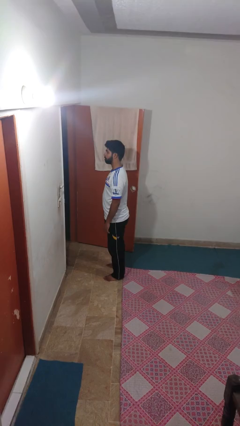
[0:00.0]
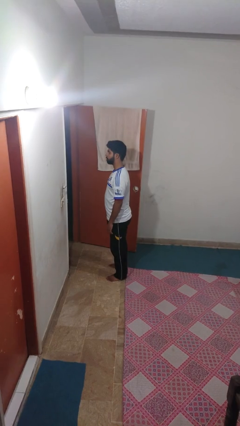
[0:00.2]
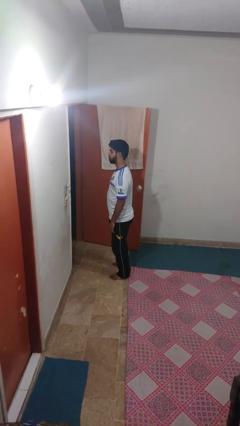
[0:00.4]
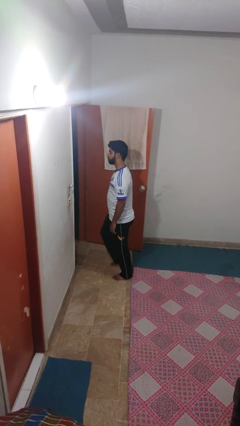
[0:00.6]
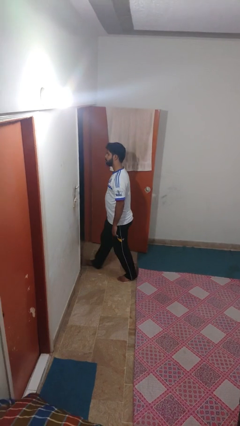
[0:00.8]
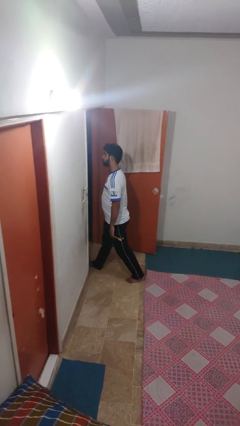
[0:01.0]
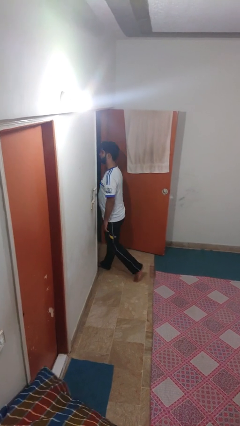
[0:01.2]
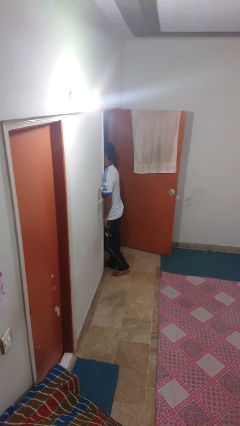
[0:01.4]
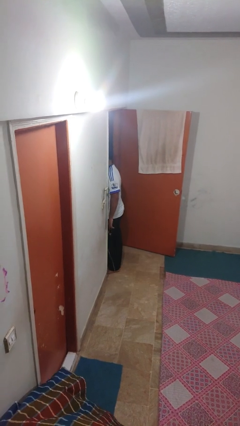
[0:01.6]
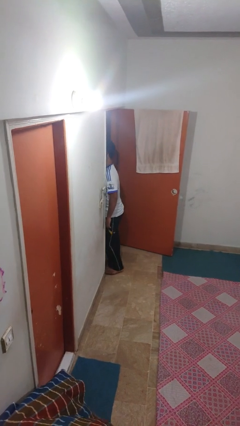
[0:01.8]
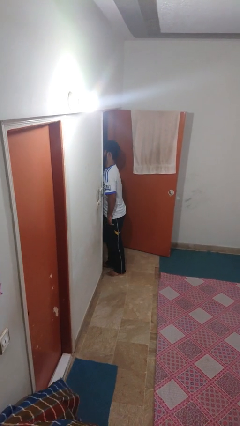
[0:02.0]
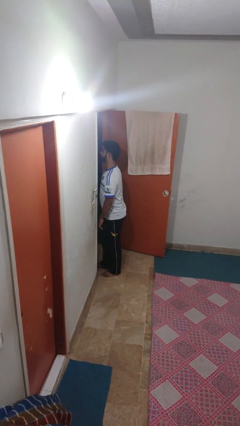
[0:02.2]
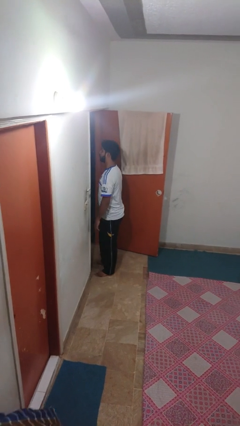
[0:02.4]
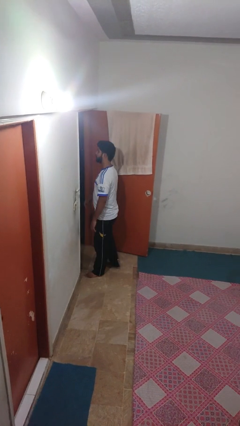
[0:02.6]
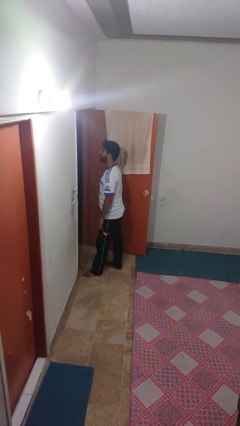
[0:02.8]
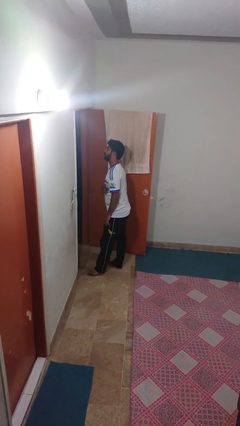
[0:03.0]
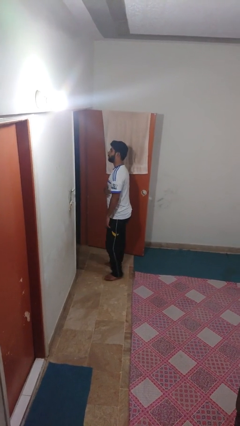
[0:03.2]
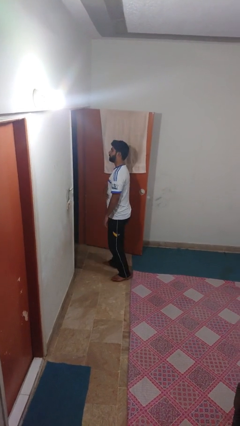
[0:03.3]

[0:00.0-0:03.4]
person bumps into wall

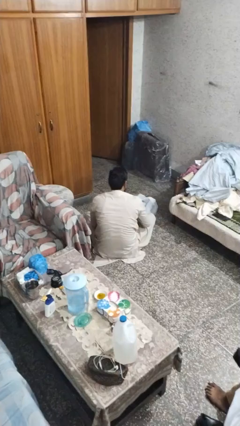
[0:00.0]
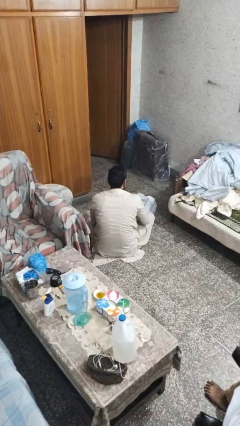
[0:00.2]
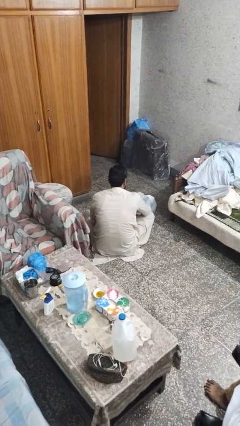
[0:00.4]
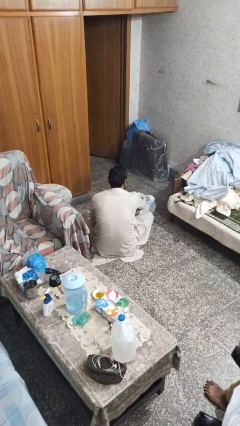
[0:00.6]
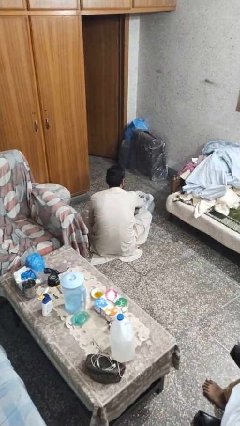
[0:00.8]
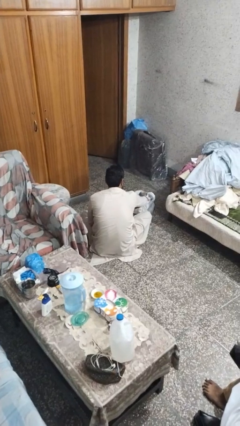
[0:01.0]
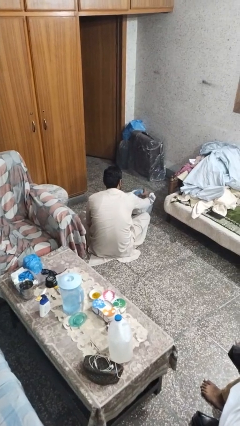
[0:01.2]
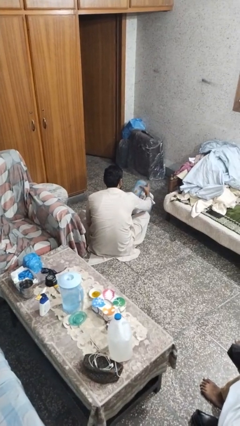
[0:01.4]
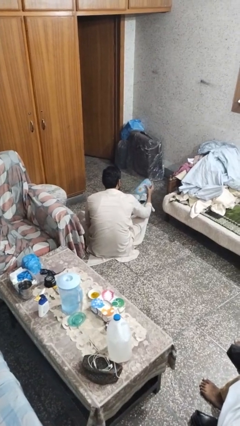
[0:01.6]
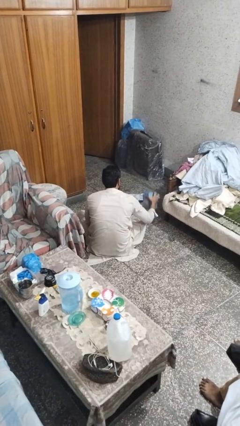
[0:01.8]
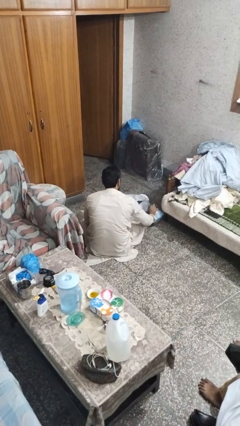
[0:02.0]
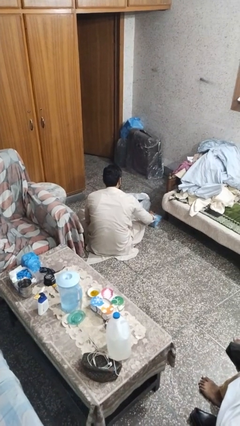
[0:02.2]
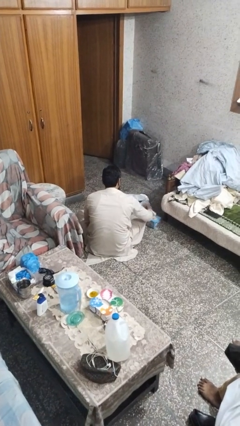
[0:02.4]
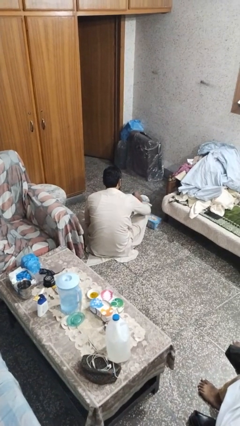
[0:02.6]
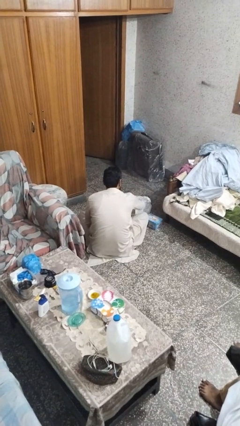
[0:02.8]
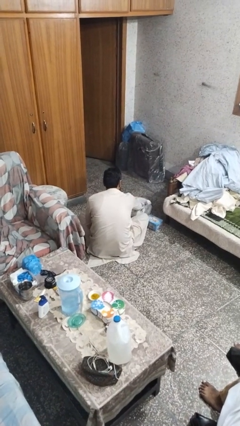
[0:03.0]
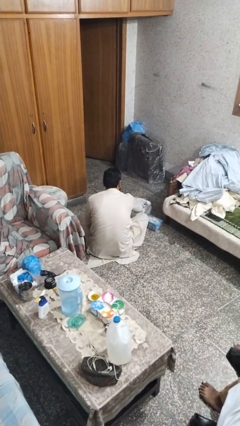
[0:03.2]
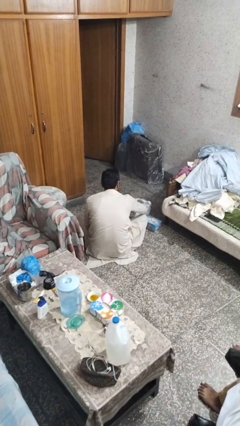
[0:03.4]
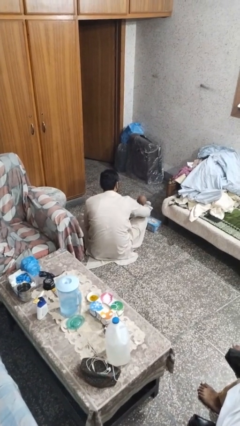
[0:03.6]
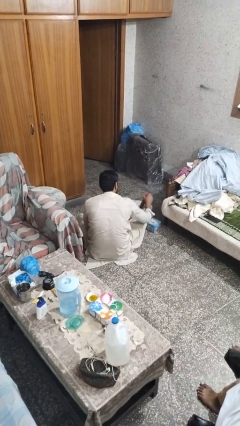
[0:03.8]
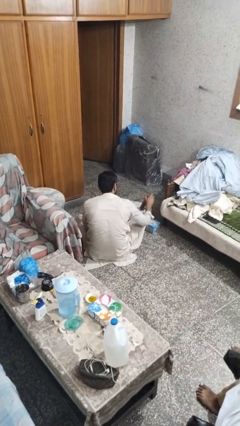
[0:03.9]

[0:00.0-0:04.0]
person takes object from bag

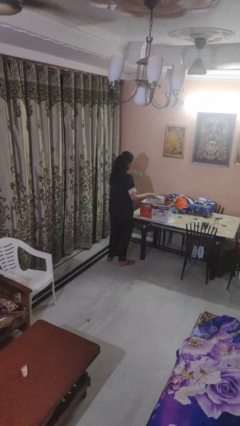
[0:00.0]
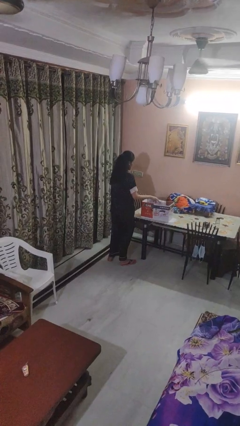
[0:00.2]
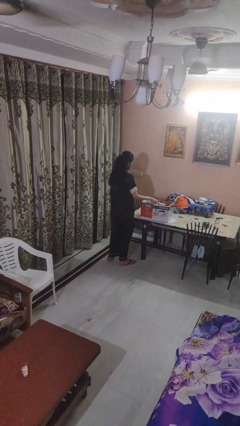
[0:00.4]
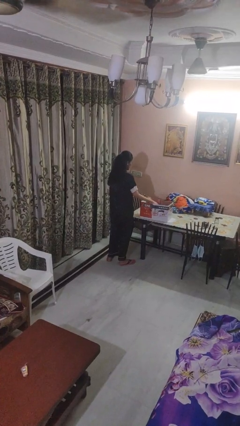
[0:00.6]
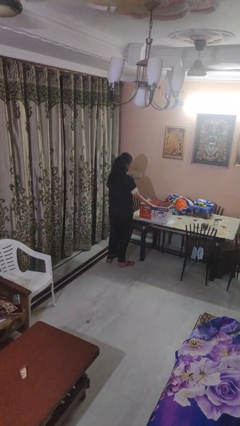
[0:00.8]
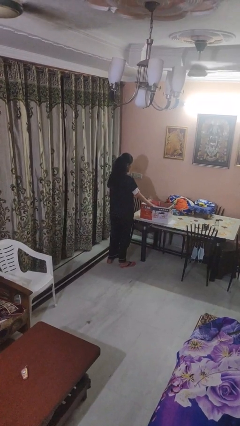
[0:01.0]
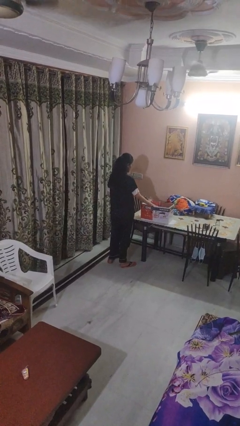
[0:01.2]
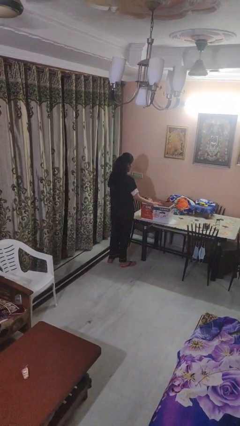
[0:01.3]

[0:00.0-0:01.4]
person puts object into box

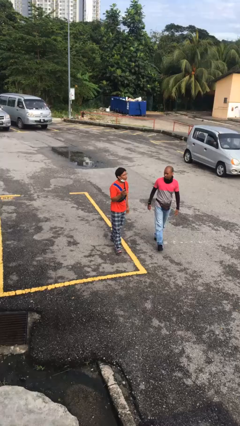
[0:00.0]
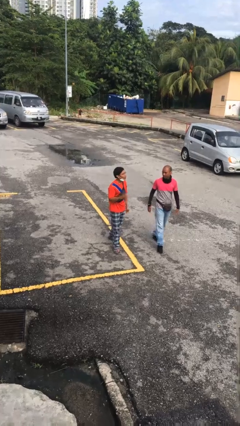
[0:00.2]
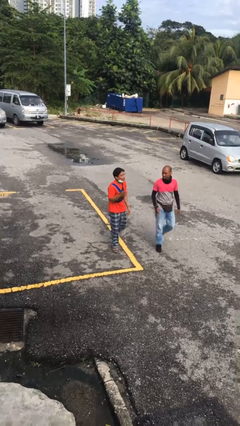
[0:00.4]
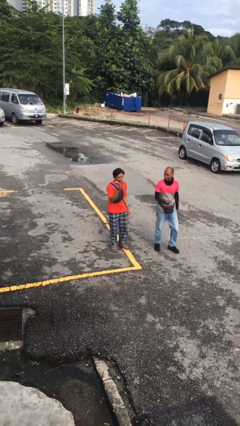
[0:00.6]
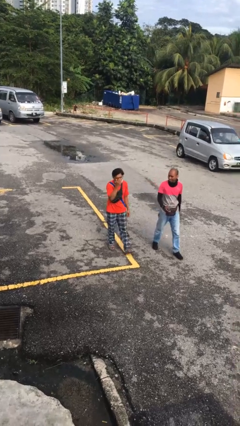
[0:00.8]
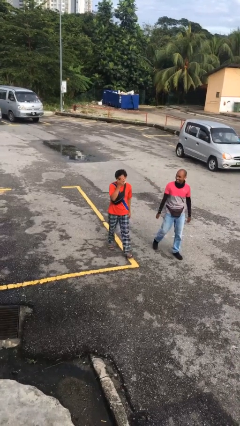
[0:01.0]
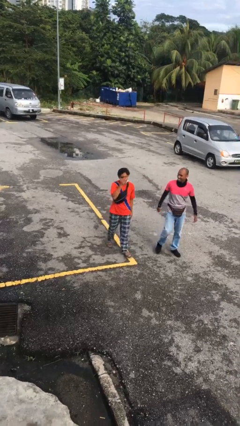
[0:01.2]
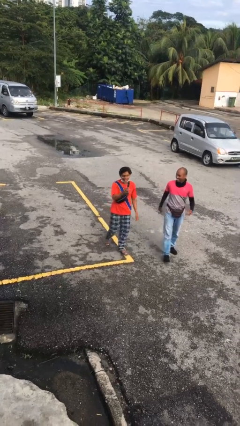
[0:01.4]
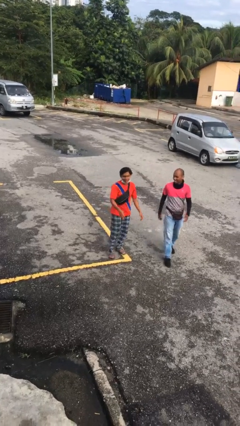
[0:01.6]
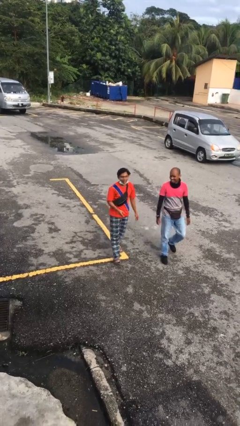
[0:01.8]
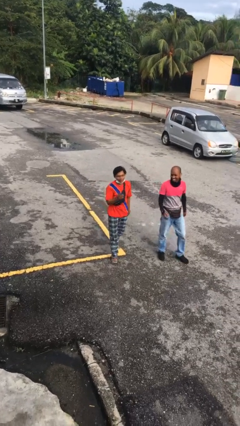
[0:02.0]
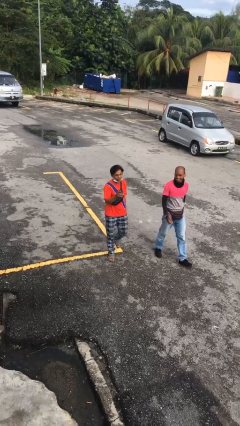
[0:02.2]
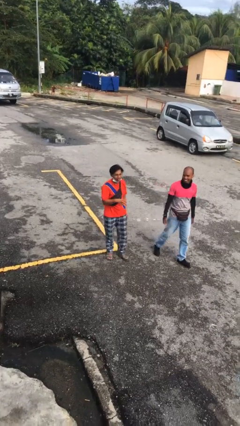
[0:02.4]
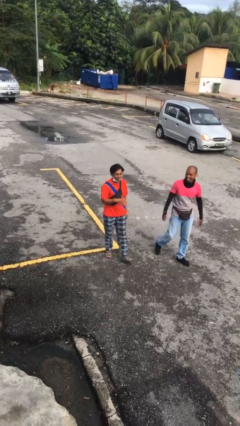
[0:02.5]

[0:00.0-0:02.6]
person talks to person

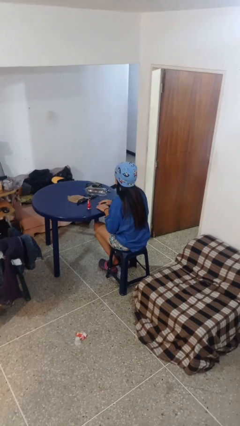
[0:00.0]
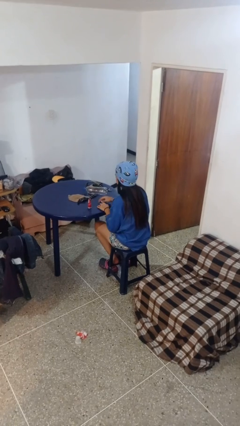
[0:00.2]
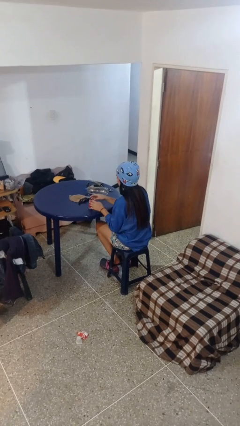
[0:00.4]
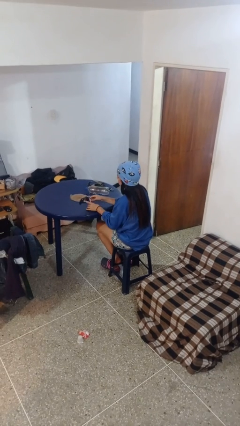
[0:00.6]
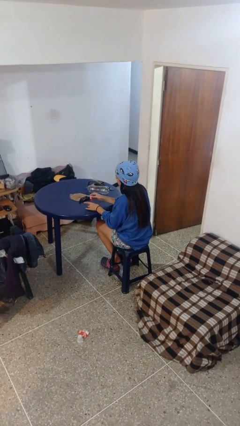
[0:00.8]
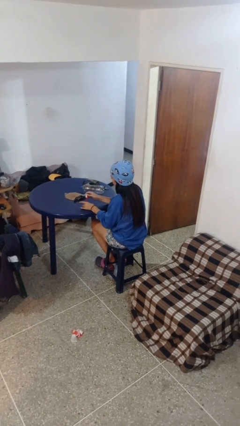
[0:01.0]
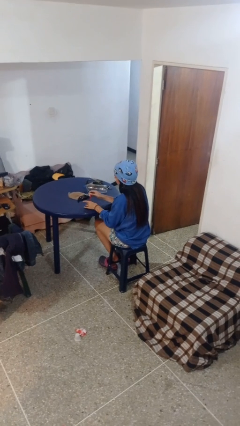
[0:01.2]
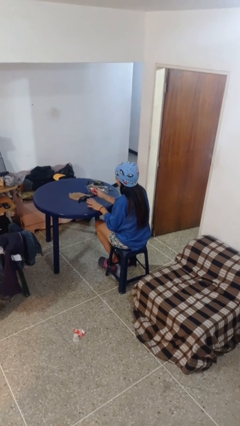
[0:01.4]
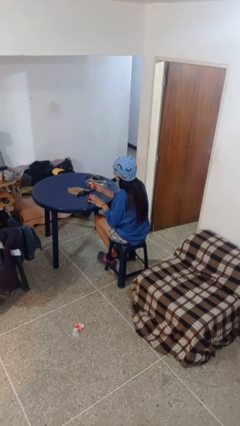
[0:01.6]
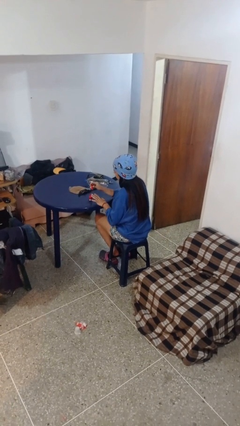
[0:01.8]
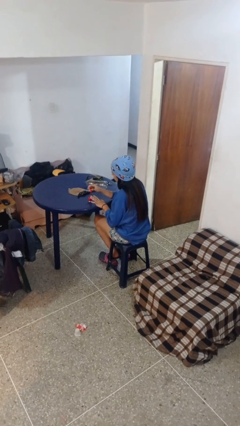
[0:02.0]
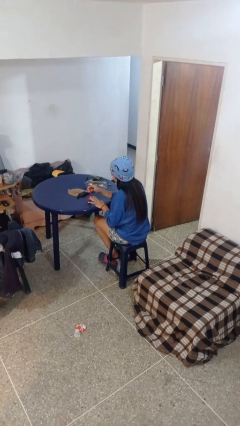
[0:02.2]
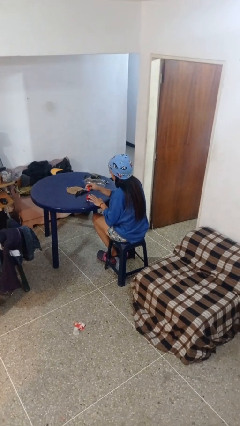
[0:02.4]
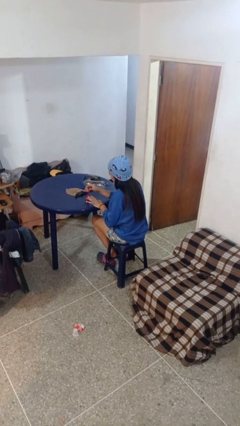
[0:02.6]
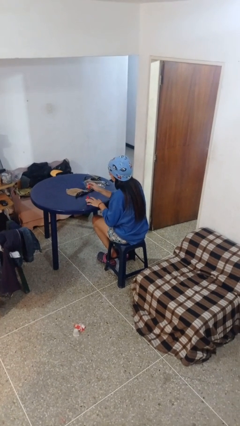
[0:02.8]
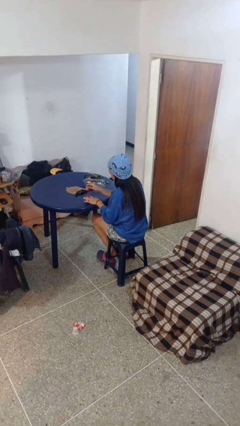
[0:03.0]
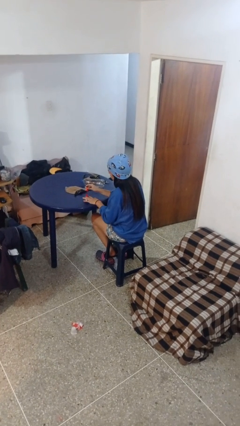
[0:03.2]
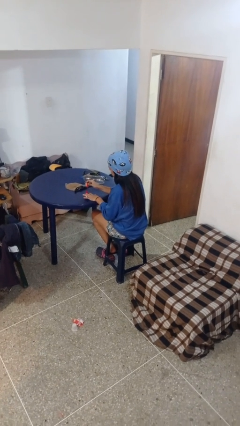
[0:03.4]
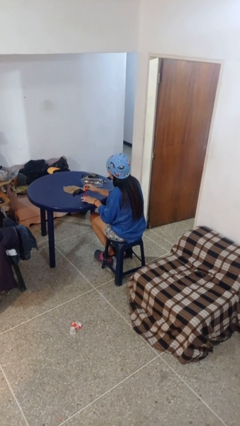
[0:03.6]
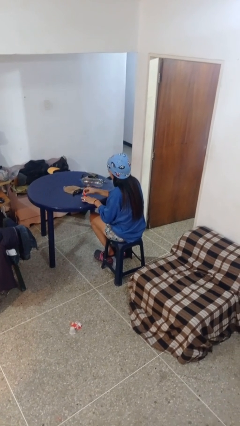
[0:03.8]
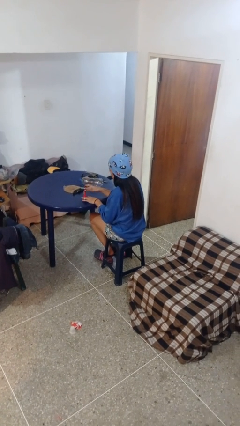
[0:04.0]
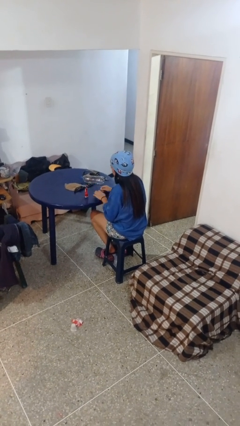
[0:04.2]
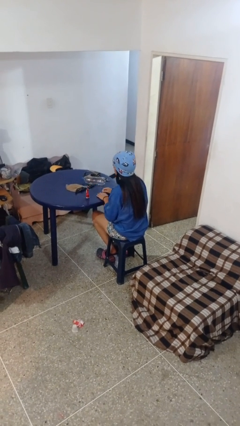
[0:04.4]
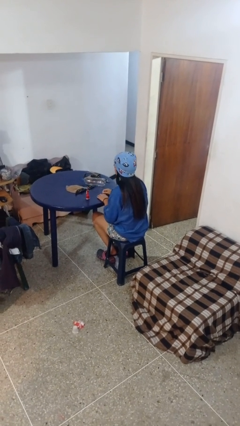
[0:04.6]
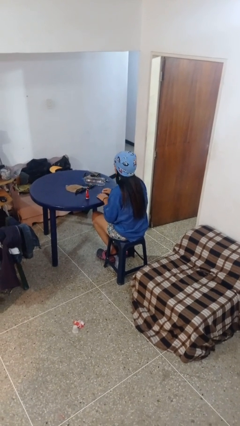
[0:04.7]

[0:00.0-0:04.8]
person paints fingernails

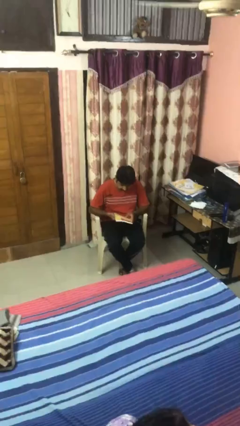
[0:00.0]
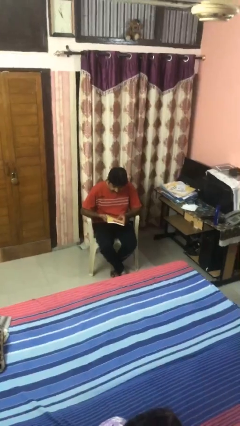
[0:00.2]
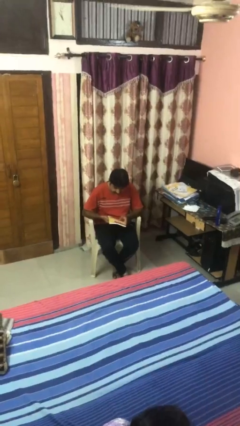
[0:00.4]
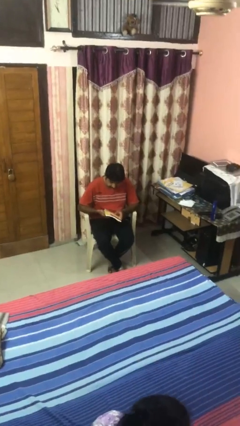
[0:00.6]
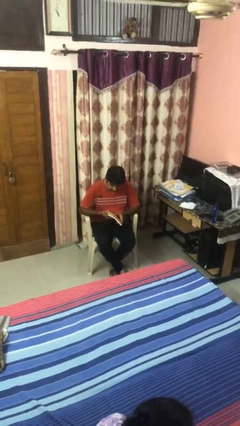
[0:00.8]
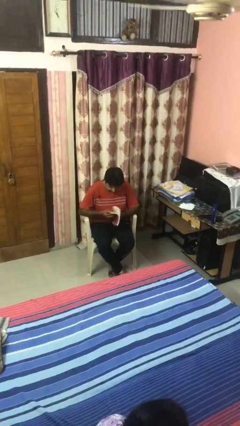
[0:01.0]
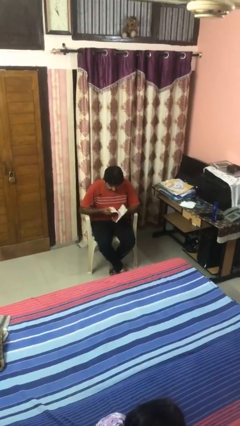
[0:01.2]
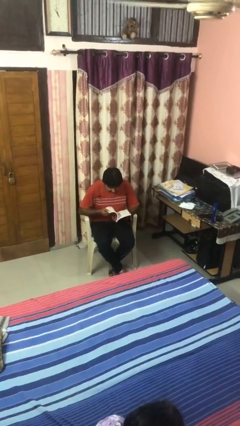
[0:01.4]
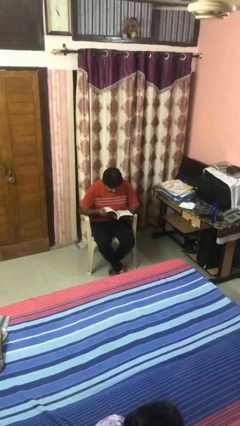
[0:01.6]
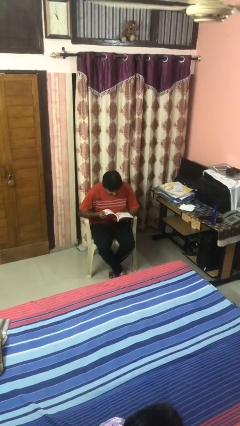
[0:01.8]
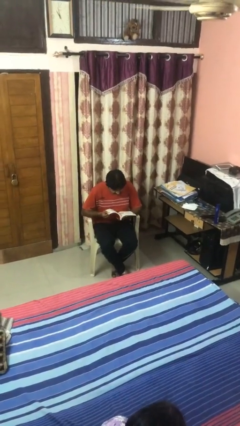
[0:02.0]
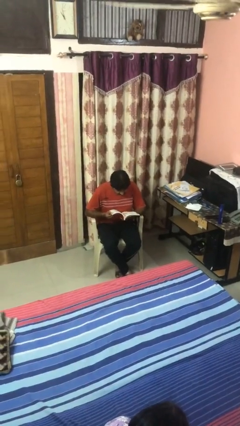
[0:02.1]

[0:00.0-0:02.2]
person reads magazine
